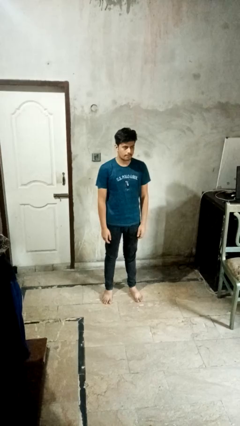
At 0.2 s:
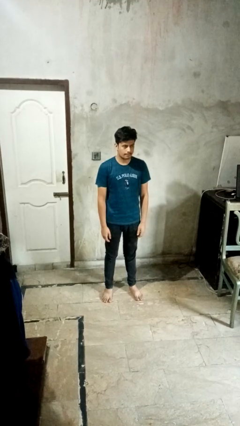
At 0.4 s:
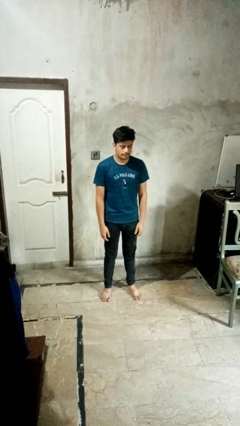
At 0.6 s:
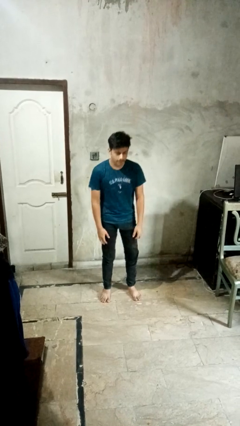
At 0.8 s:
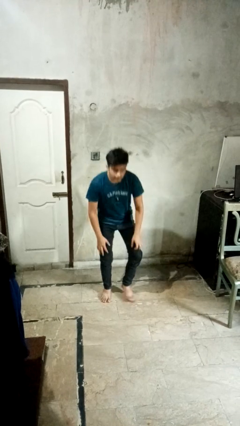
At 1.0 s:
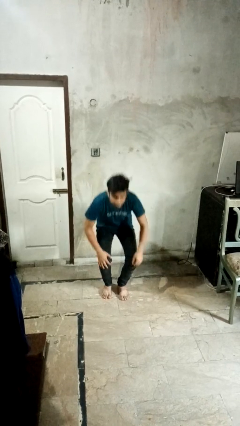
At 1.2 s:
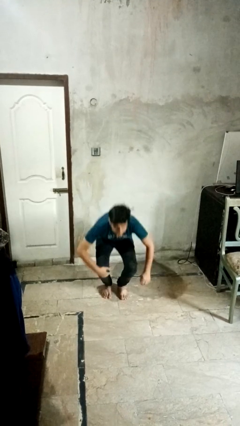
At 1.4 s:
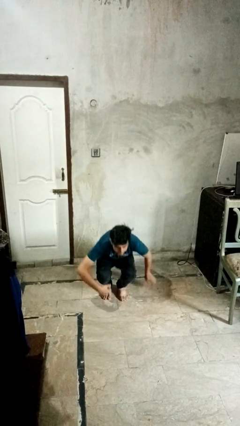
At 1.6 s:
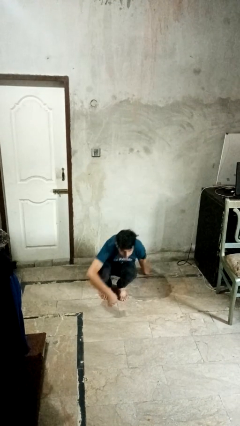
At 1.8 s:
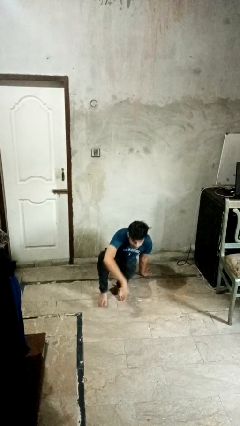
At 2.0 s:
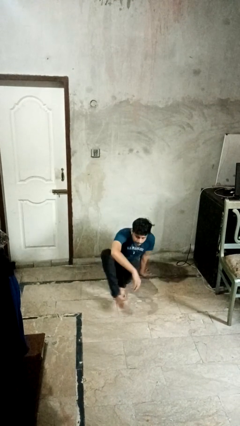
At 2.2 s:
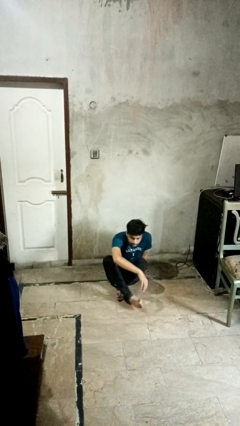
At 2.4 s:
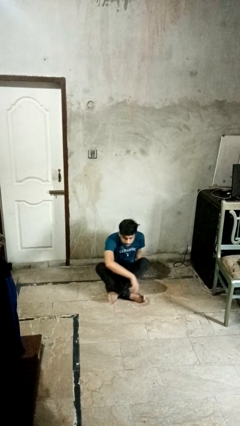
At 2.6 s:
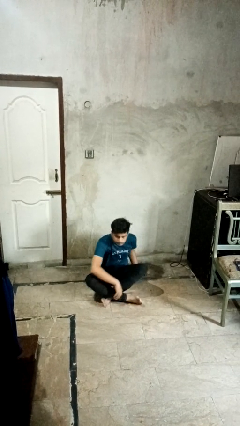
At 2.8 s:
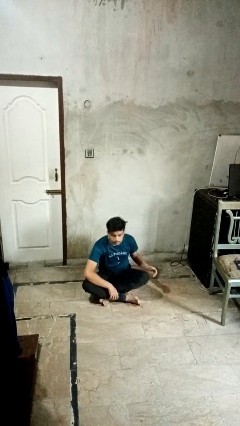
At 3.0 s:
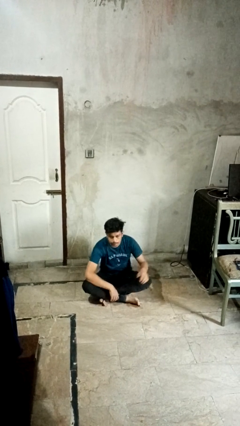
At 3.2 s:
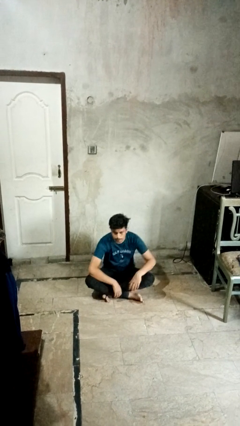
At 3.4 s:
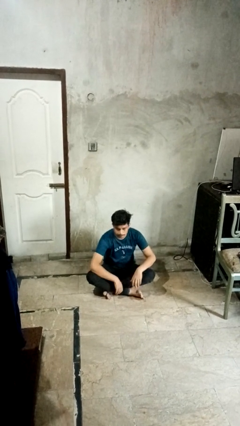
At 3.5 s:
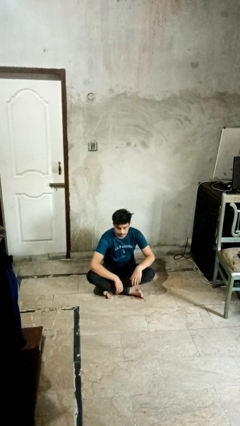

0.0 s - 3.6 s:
person sits crisscross

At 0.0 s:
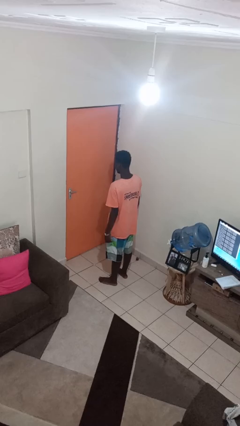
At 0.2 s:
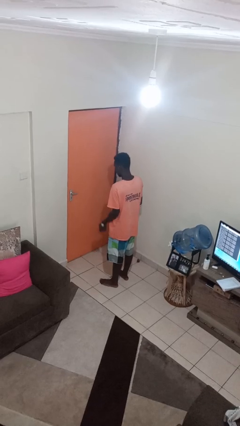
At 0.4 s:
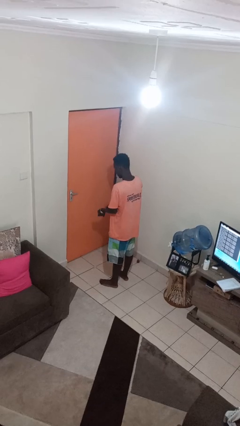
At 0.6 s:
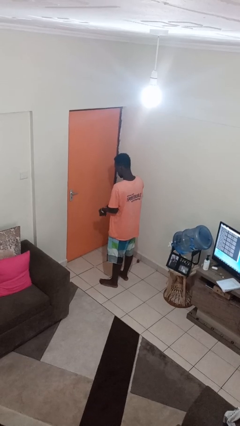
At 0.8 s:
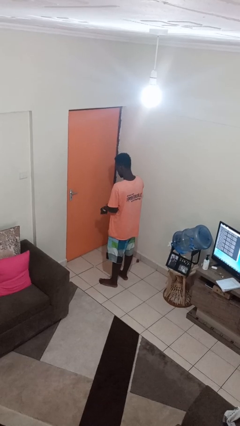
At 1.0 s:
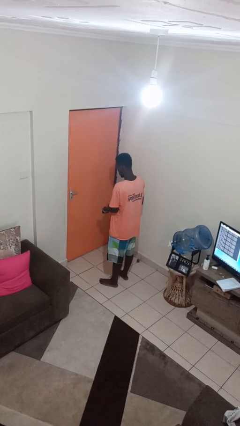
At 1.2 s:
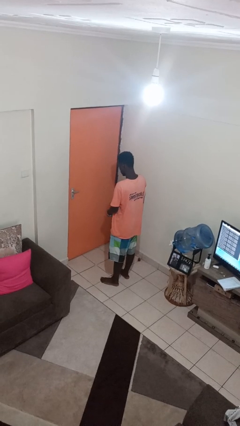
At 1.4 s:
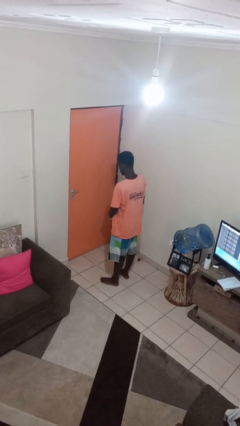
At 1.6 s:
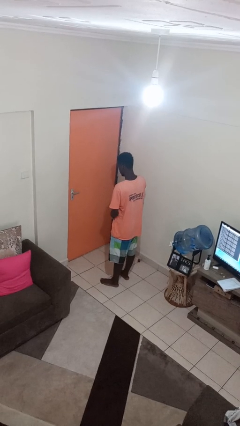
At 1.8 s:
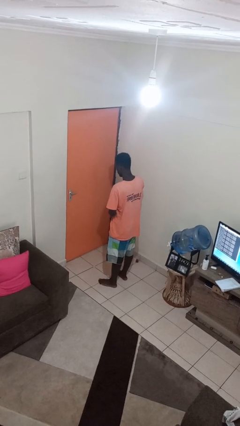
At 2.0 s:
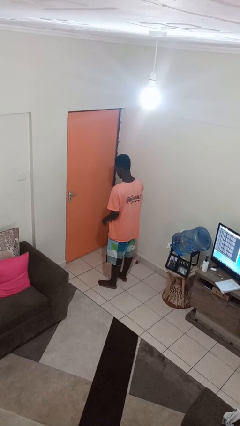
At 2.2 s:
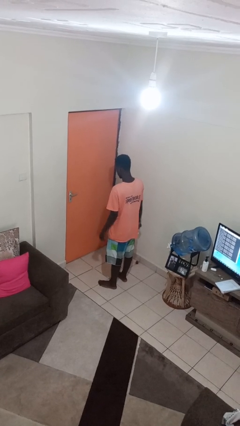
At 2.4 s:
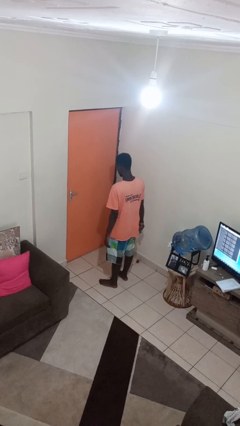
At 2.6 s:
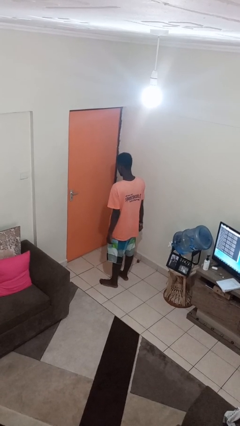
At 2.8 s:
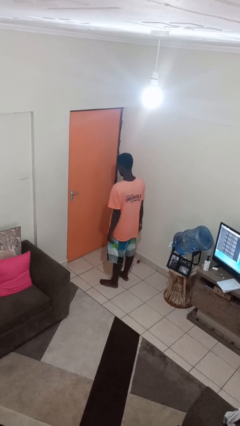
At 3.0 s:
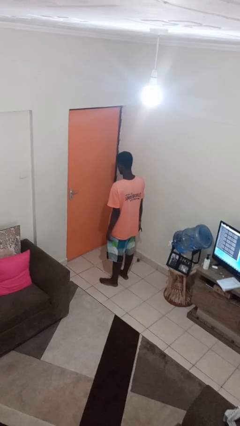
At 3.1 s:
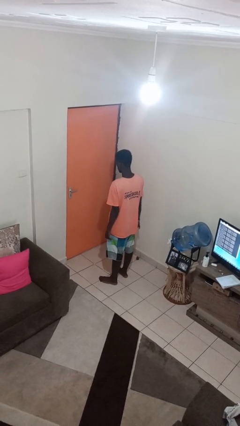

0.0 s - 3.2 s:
person takes off wristwatch

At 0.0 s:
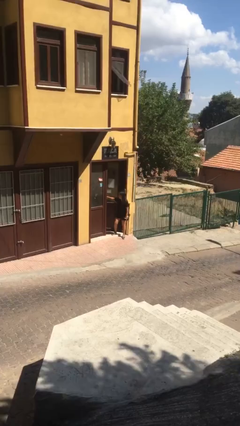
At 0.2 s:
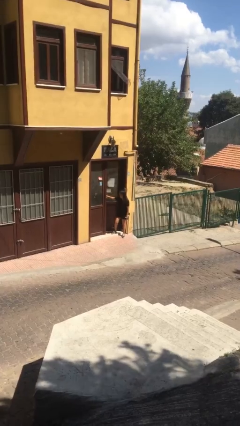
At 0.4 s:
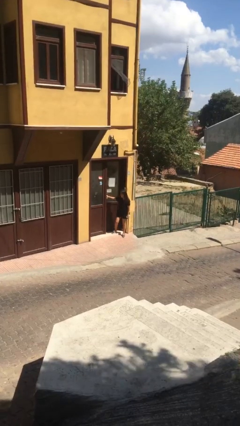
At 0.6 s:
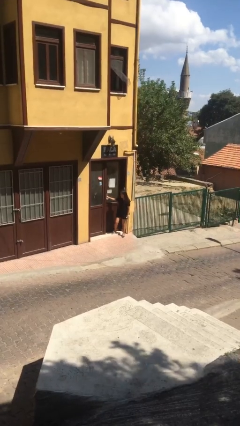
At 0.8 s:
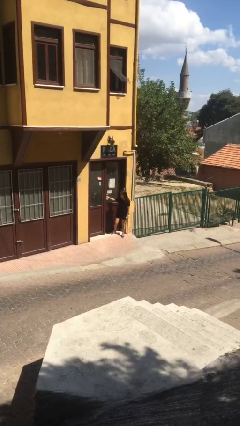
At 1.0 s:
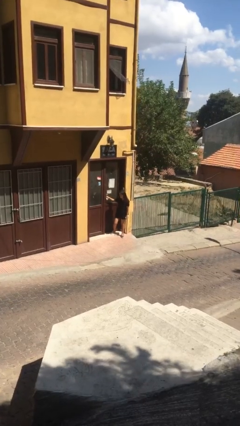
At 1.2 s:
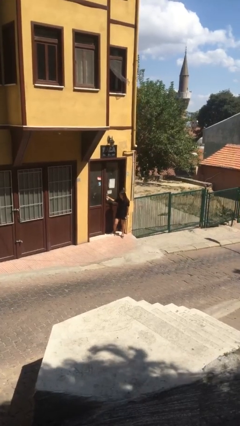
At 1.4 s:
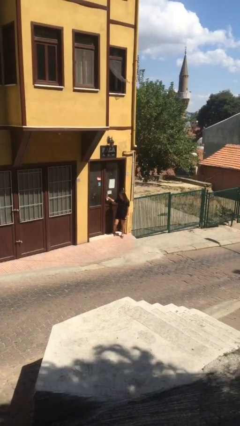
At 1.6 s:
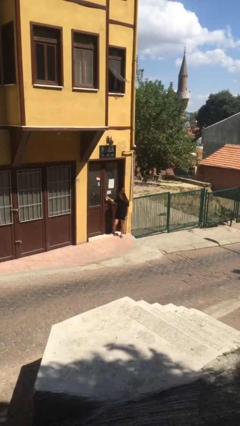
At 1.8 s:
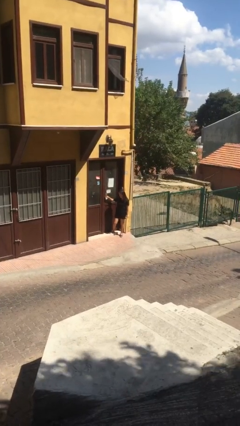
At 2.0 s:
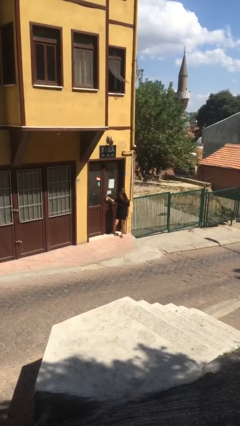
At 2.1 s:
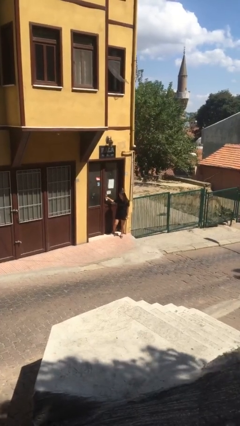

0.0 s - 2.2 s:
person closes facility door

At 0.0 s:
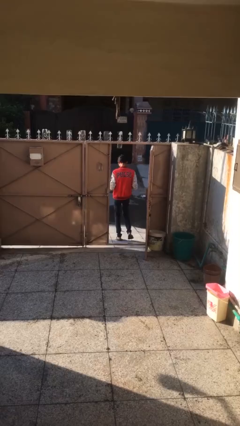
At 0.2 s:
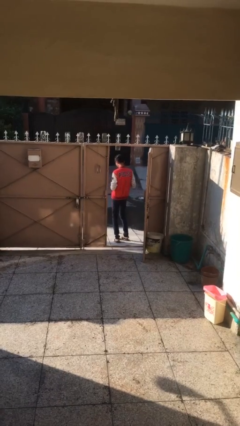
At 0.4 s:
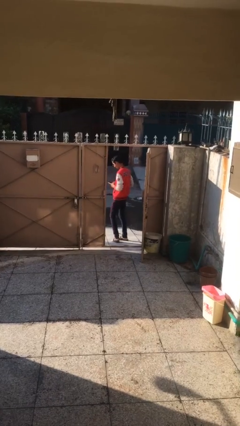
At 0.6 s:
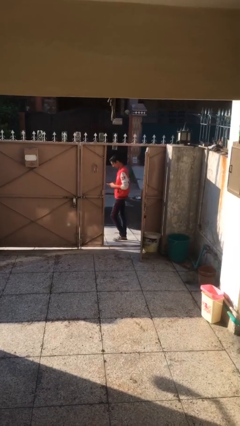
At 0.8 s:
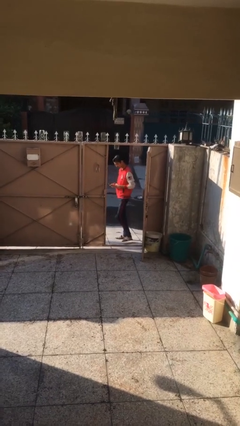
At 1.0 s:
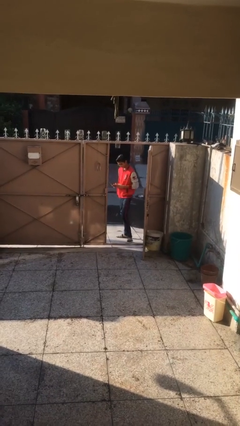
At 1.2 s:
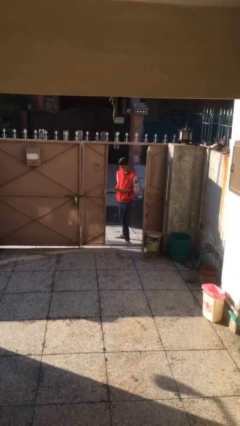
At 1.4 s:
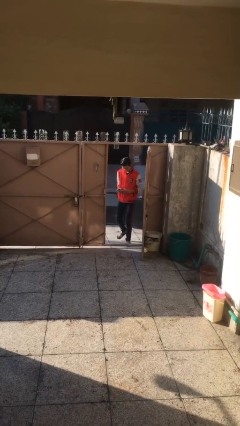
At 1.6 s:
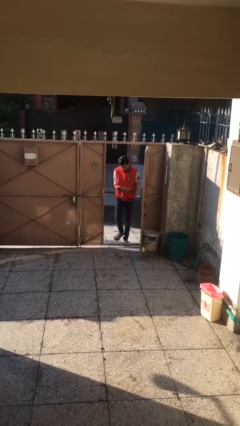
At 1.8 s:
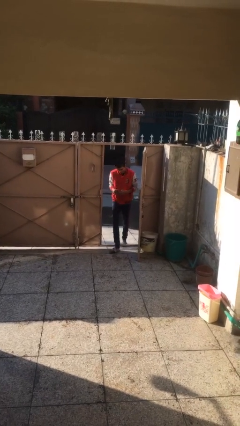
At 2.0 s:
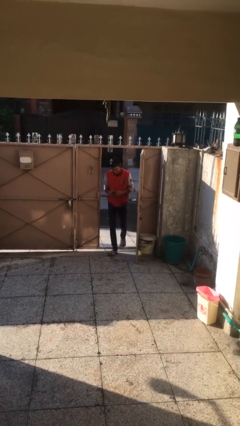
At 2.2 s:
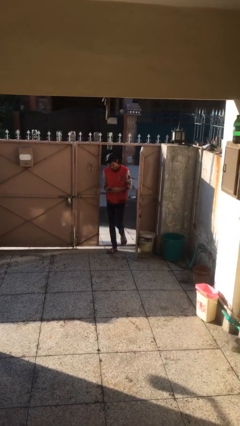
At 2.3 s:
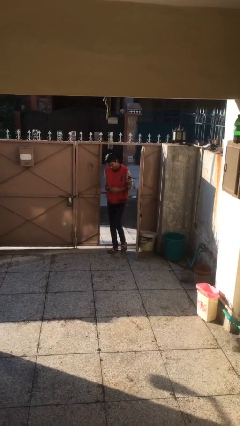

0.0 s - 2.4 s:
person enters scene through structure

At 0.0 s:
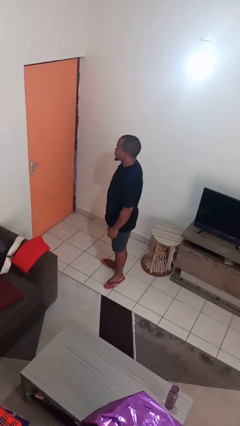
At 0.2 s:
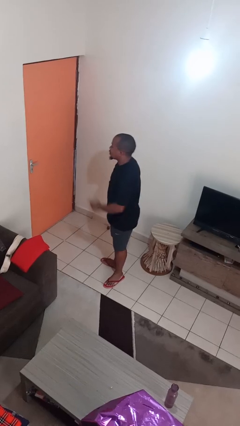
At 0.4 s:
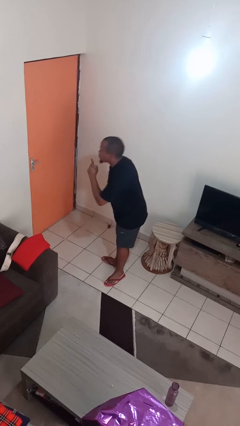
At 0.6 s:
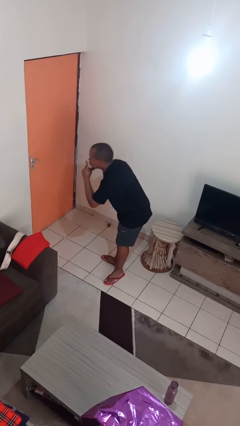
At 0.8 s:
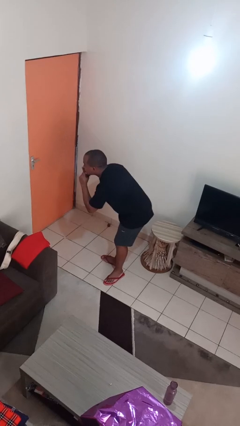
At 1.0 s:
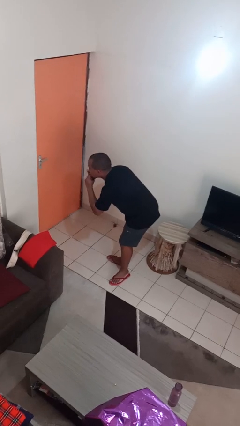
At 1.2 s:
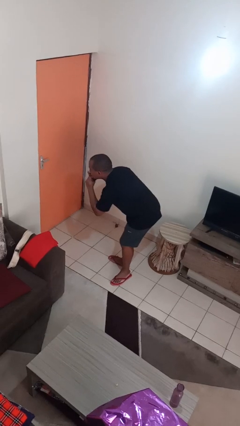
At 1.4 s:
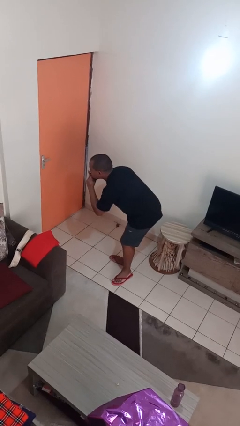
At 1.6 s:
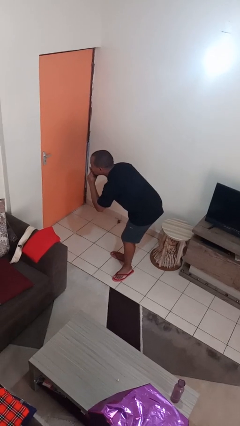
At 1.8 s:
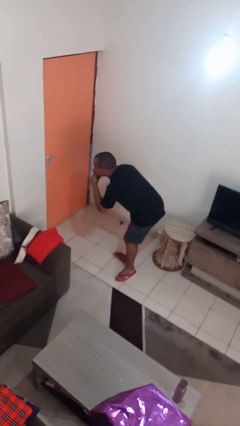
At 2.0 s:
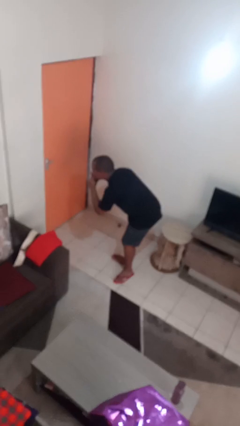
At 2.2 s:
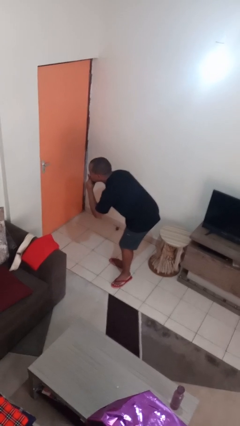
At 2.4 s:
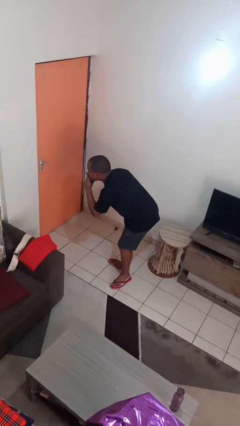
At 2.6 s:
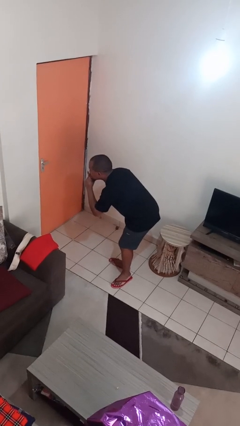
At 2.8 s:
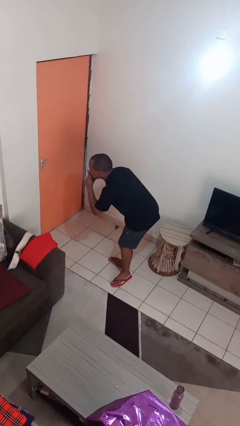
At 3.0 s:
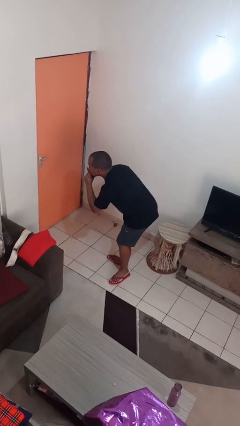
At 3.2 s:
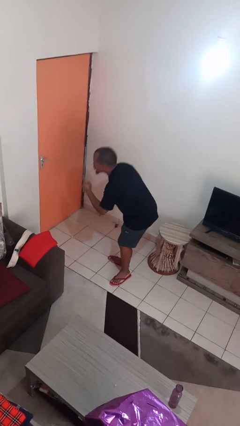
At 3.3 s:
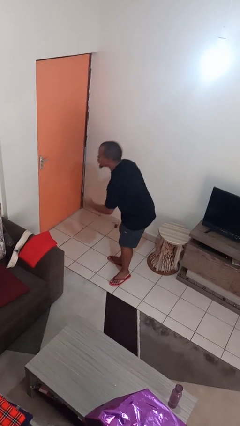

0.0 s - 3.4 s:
person gestures be quiet

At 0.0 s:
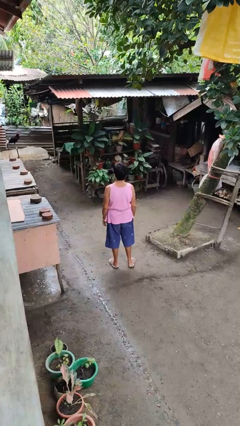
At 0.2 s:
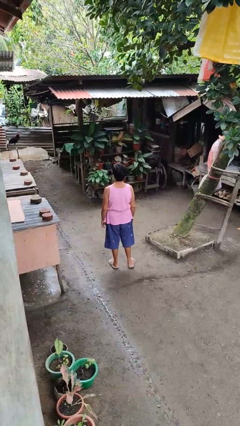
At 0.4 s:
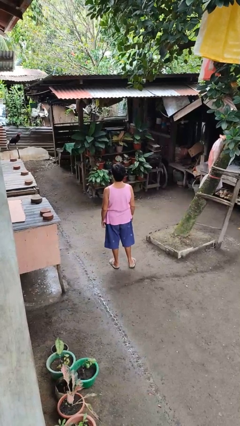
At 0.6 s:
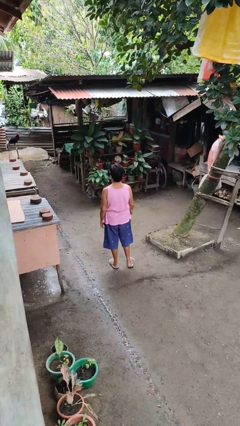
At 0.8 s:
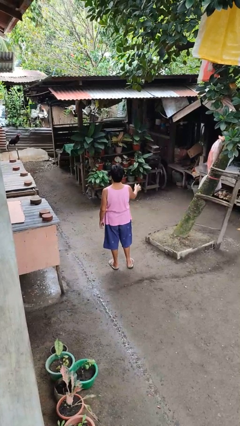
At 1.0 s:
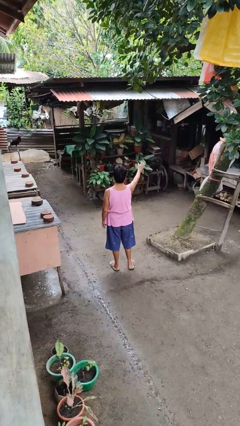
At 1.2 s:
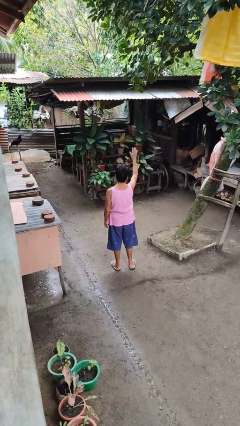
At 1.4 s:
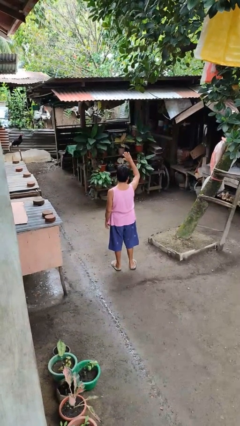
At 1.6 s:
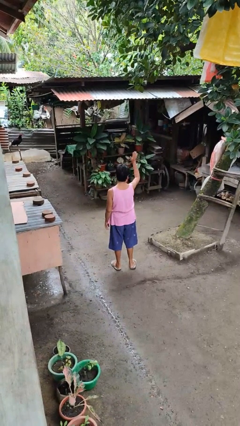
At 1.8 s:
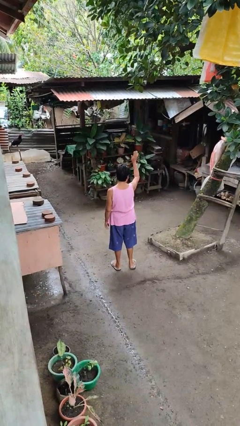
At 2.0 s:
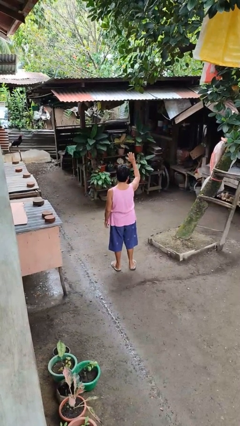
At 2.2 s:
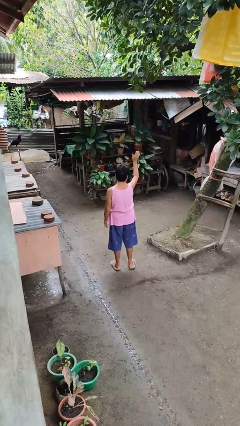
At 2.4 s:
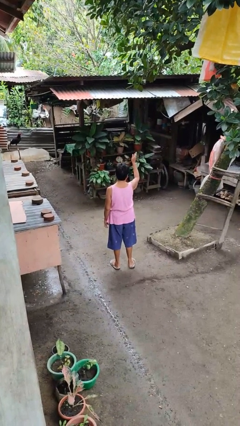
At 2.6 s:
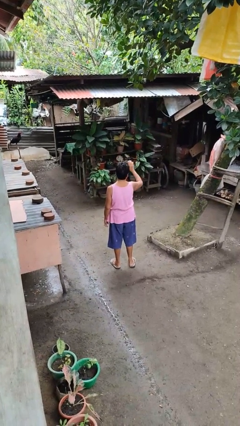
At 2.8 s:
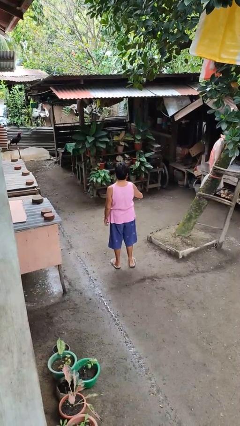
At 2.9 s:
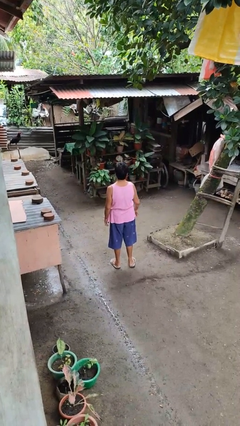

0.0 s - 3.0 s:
person waves at person
